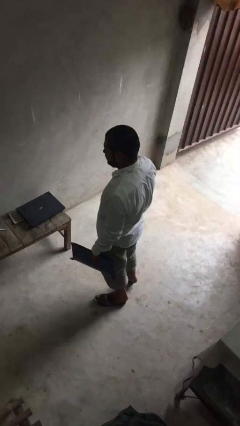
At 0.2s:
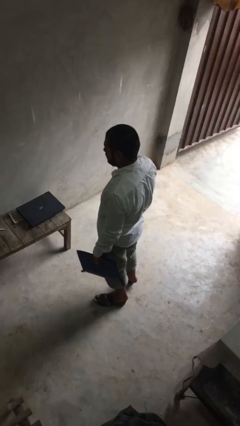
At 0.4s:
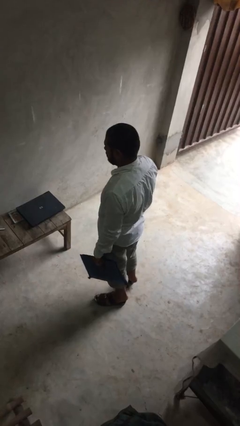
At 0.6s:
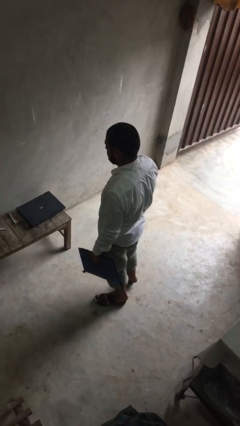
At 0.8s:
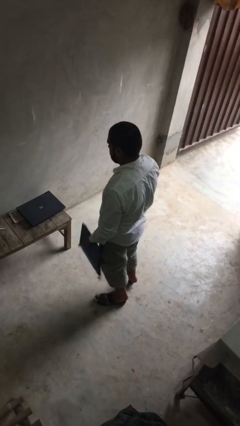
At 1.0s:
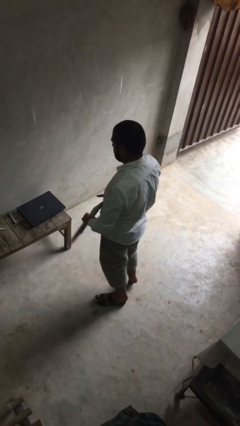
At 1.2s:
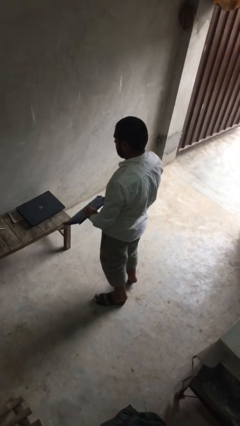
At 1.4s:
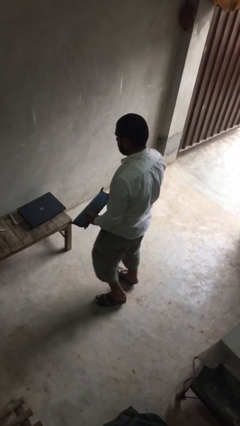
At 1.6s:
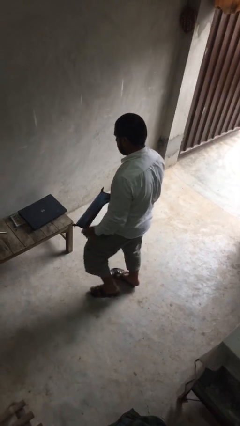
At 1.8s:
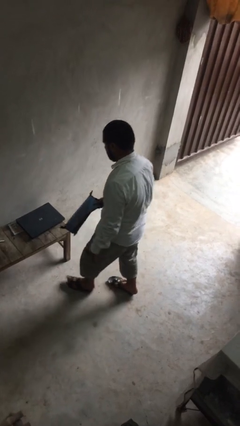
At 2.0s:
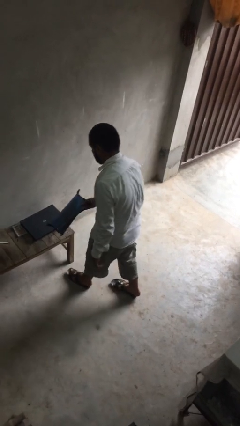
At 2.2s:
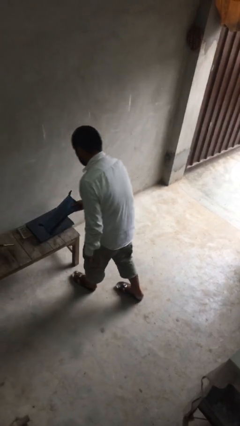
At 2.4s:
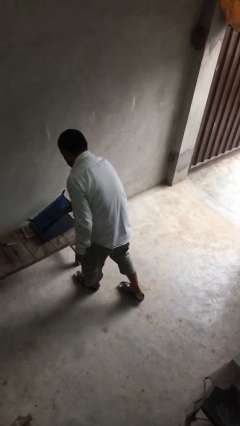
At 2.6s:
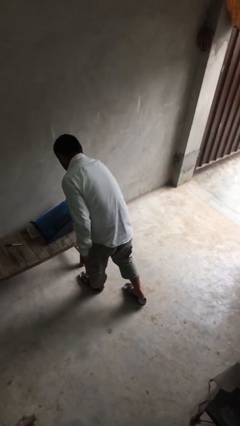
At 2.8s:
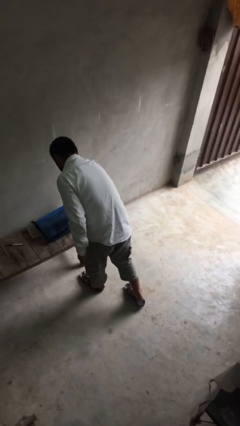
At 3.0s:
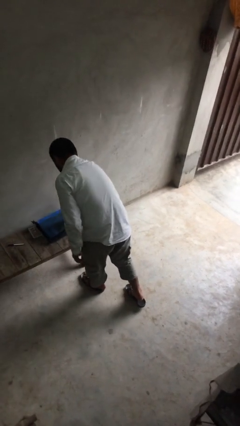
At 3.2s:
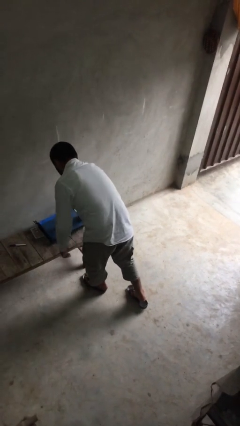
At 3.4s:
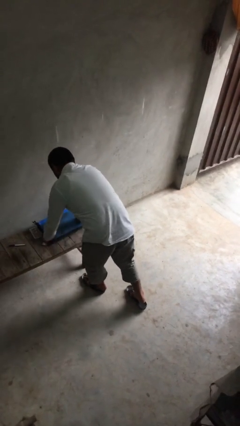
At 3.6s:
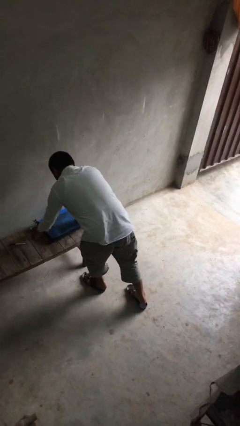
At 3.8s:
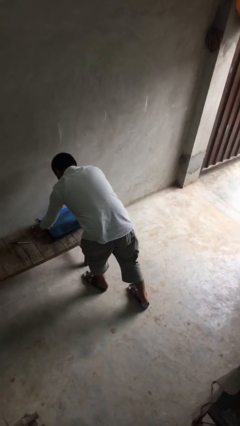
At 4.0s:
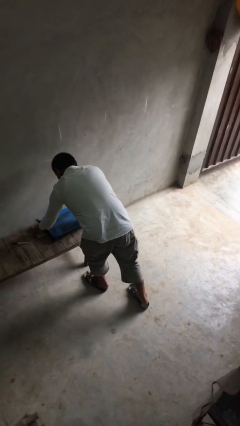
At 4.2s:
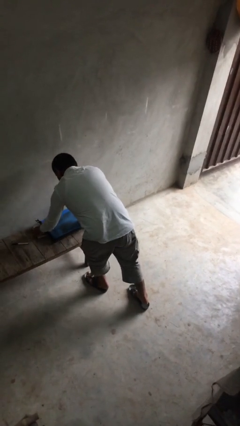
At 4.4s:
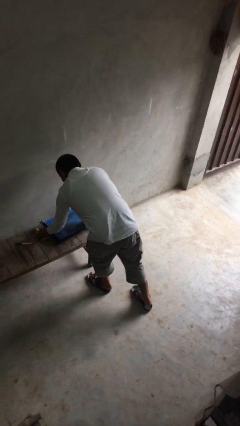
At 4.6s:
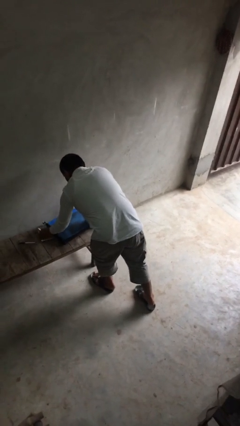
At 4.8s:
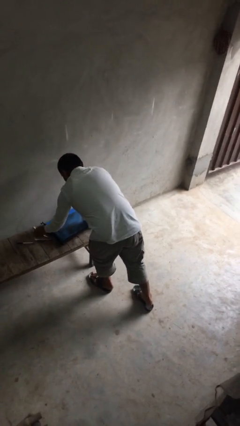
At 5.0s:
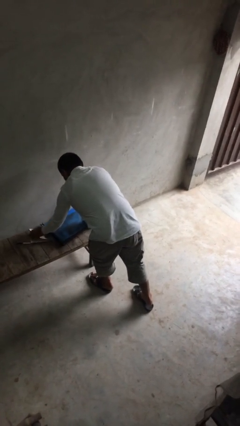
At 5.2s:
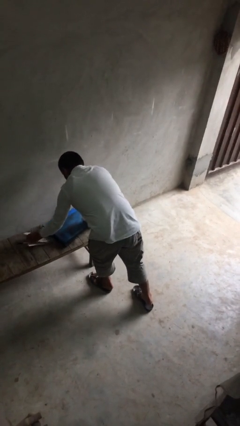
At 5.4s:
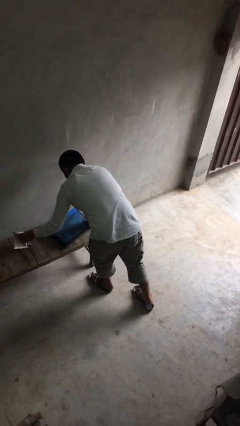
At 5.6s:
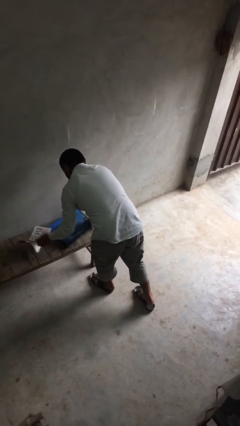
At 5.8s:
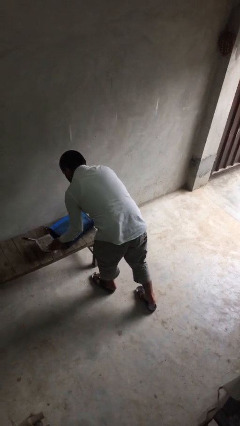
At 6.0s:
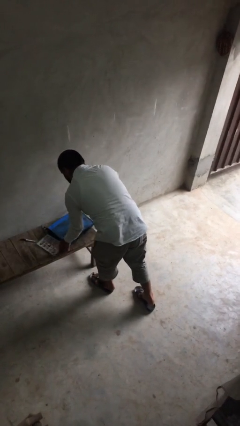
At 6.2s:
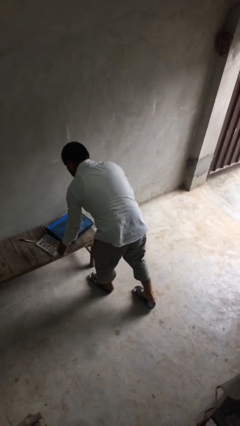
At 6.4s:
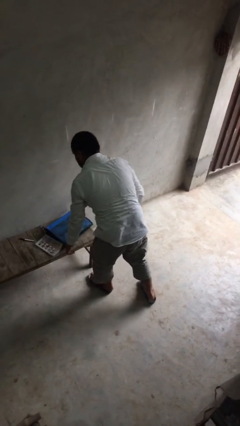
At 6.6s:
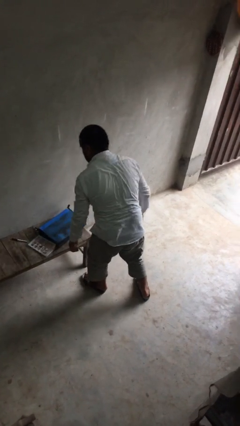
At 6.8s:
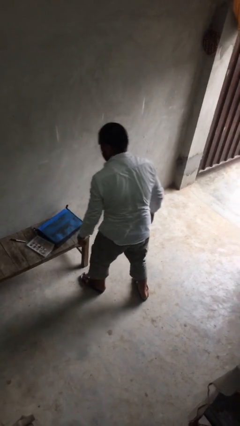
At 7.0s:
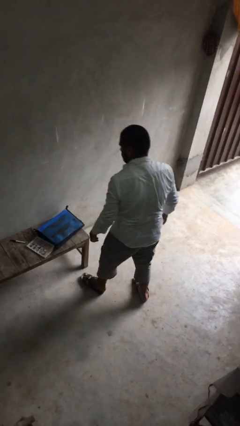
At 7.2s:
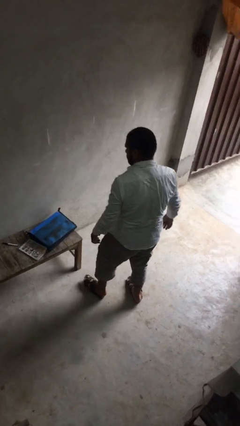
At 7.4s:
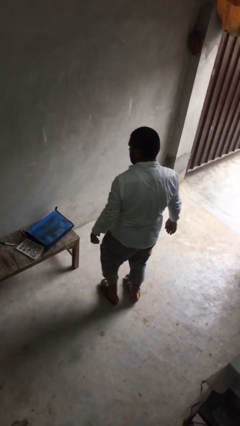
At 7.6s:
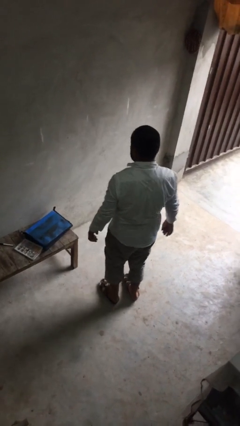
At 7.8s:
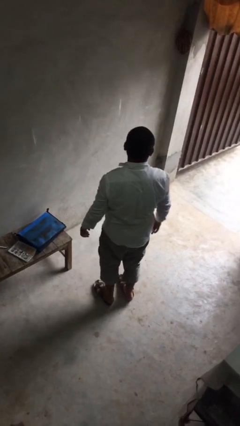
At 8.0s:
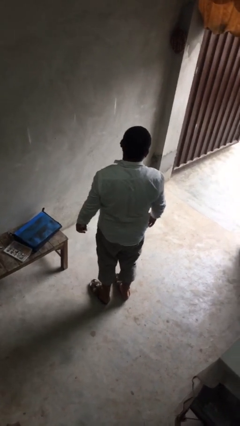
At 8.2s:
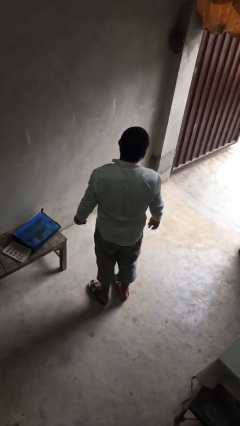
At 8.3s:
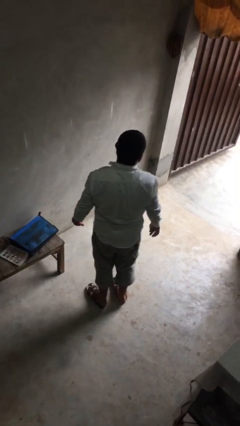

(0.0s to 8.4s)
person puts down object on table

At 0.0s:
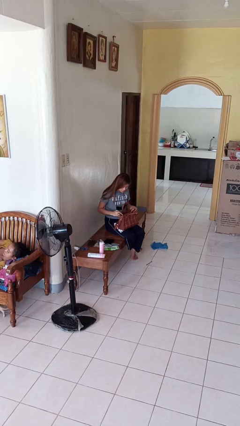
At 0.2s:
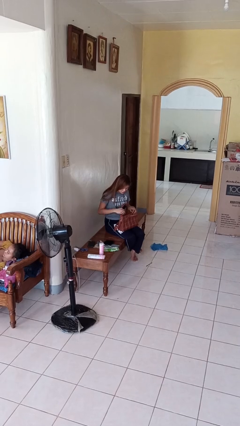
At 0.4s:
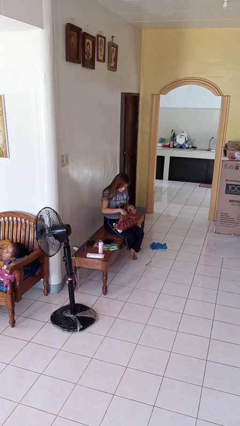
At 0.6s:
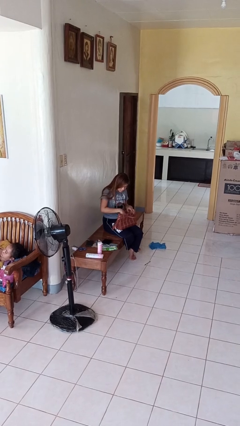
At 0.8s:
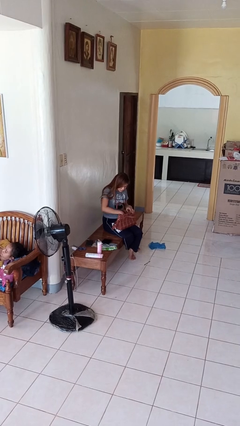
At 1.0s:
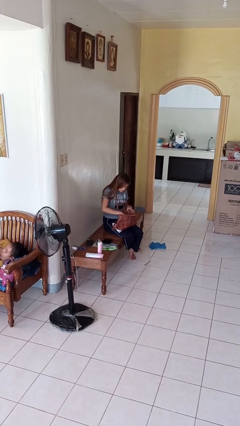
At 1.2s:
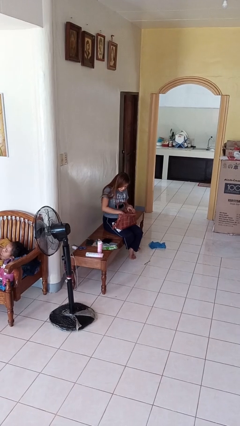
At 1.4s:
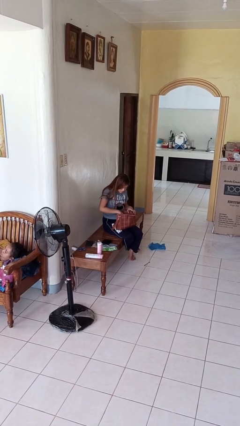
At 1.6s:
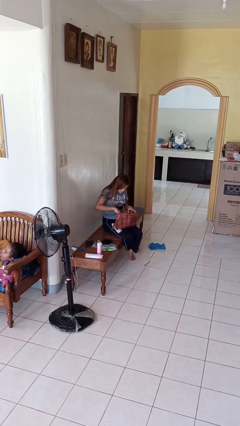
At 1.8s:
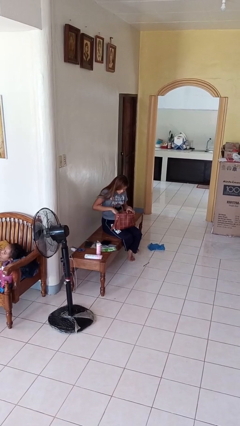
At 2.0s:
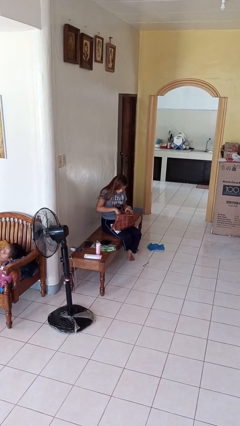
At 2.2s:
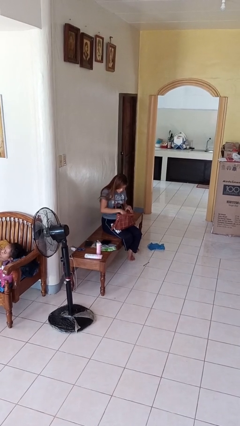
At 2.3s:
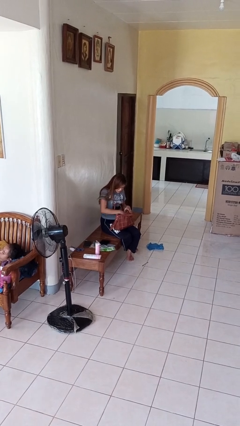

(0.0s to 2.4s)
person searches in purse

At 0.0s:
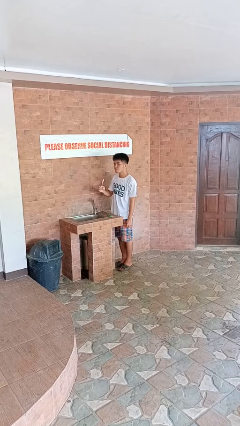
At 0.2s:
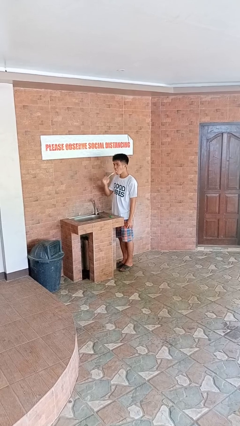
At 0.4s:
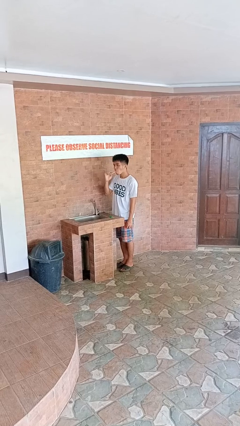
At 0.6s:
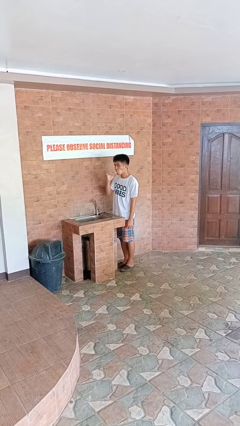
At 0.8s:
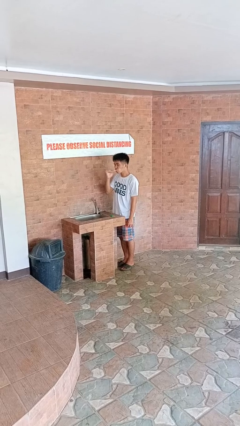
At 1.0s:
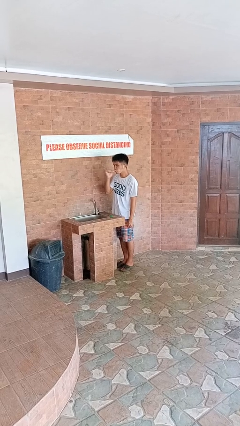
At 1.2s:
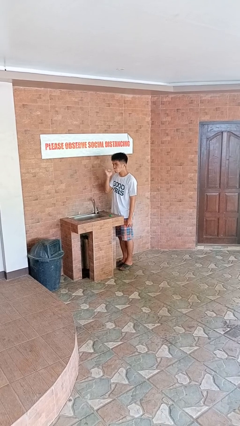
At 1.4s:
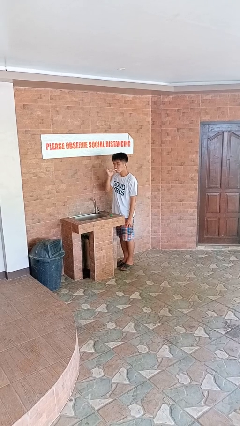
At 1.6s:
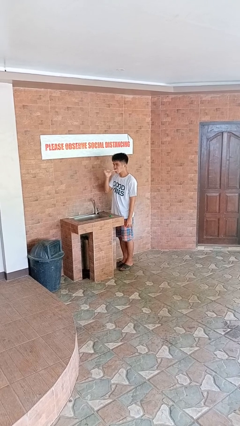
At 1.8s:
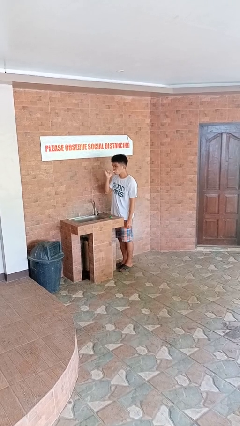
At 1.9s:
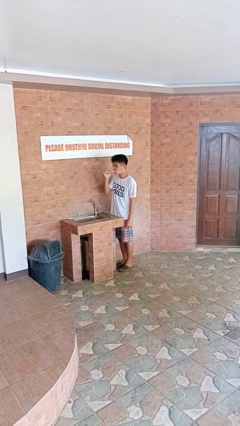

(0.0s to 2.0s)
person brushes teeth

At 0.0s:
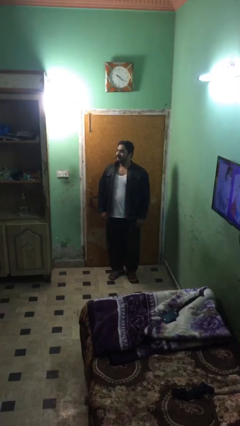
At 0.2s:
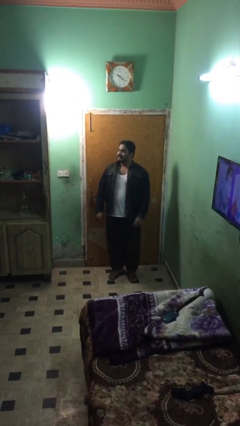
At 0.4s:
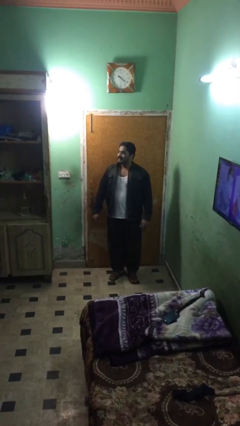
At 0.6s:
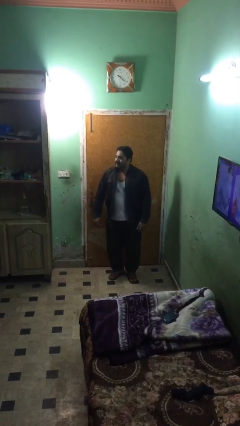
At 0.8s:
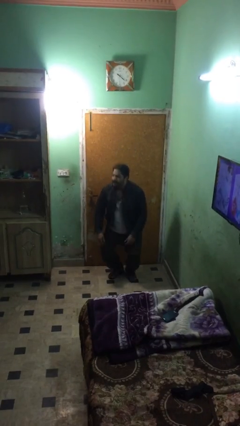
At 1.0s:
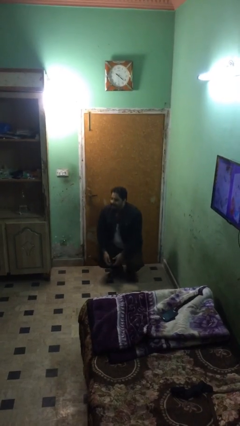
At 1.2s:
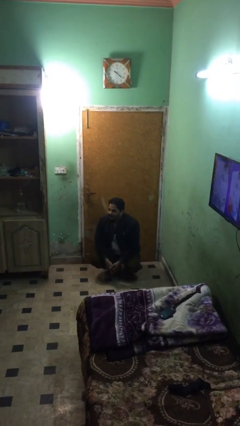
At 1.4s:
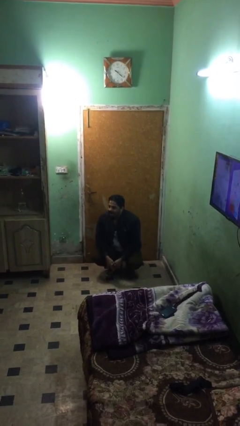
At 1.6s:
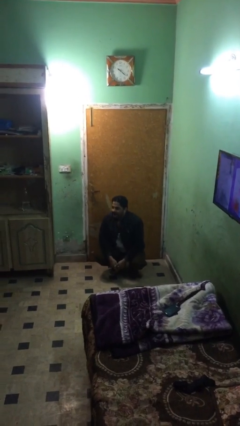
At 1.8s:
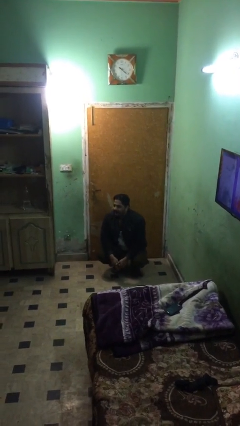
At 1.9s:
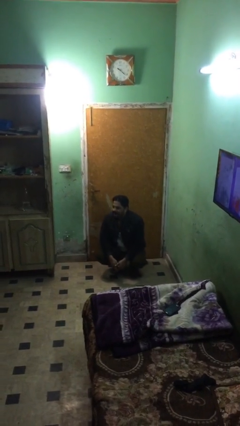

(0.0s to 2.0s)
person sits down

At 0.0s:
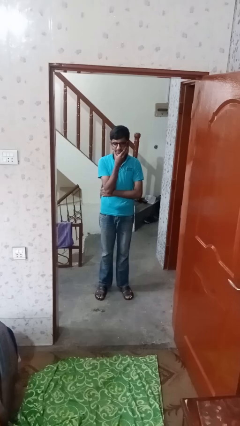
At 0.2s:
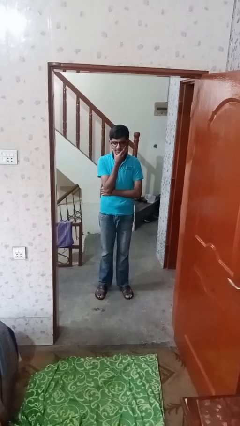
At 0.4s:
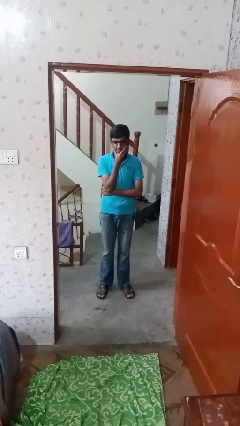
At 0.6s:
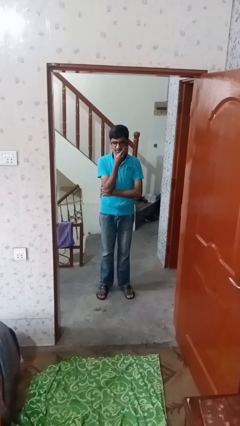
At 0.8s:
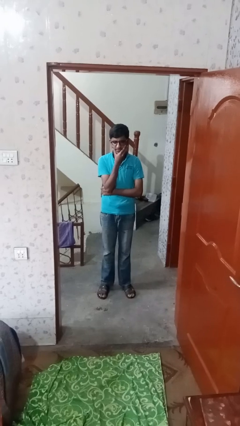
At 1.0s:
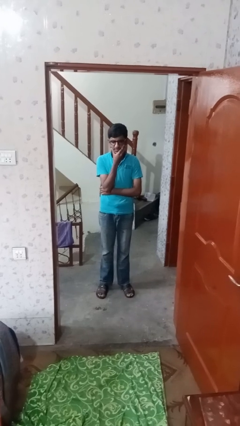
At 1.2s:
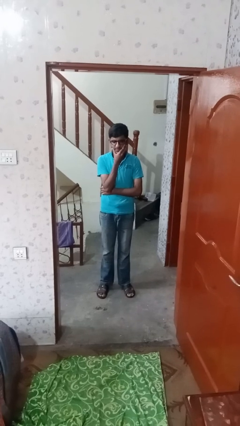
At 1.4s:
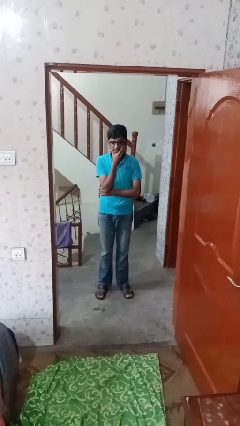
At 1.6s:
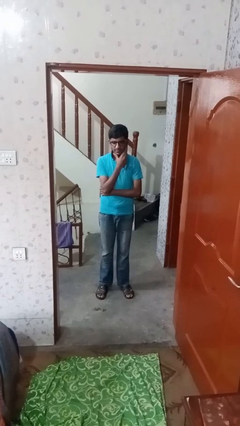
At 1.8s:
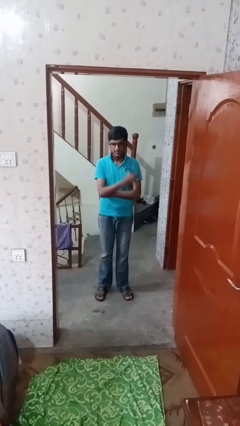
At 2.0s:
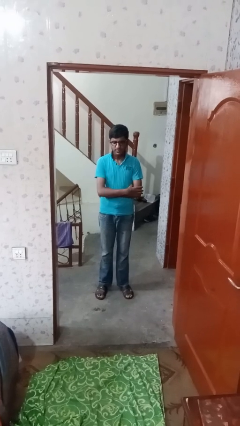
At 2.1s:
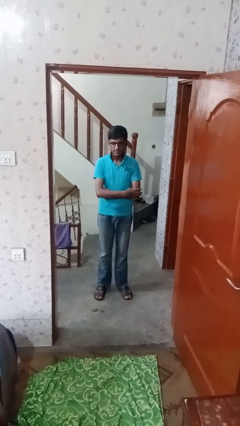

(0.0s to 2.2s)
person strokes chin

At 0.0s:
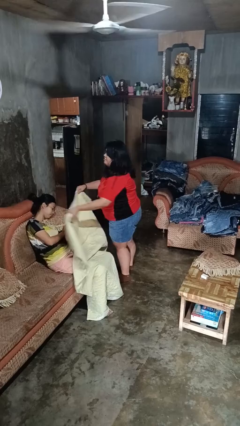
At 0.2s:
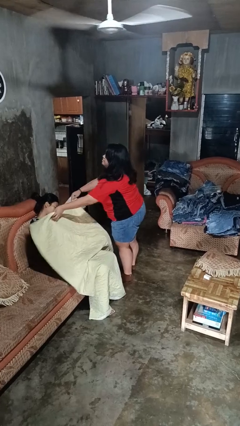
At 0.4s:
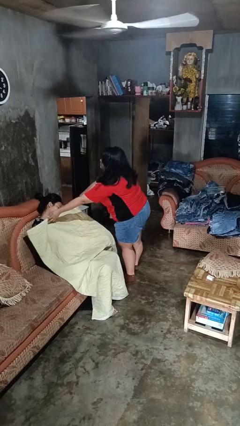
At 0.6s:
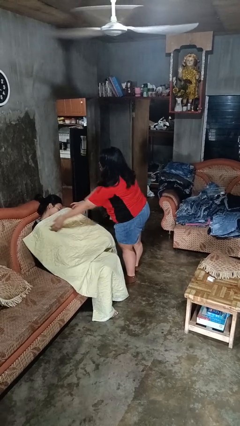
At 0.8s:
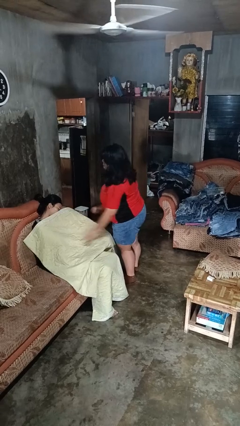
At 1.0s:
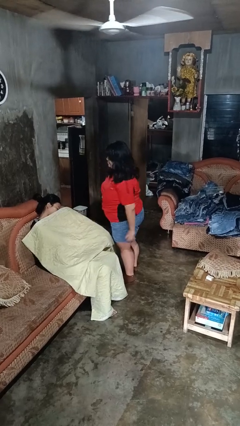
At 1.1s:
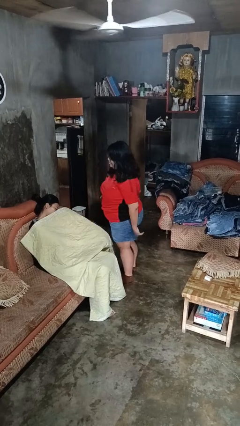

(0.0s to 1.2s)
person covers friend with blanket
